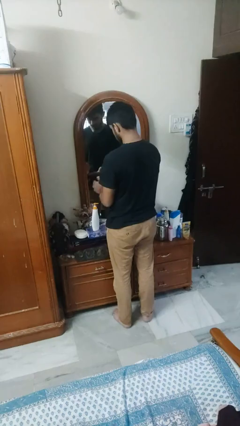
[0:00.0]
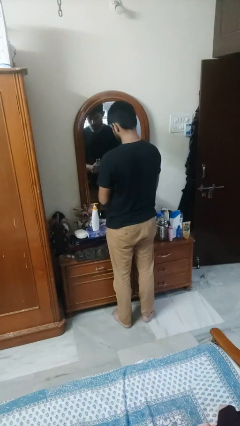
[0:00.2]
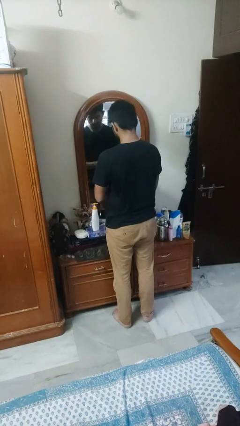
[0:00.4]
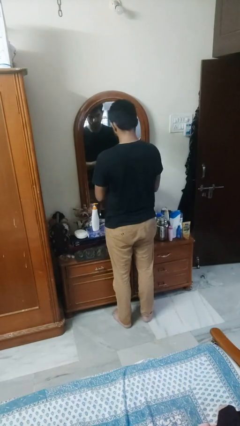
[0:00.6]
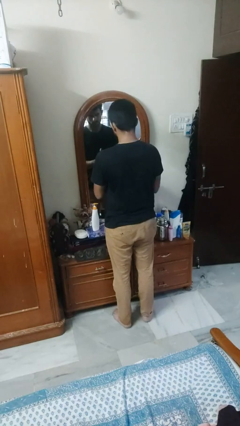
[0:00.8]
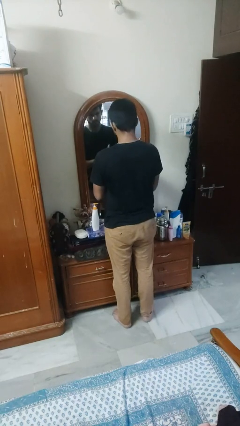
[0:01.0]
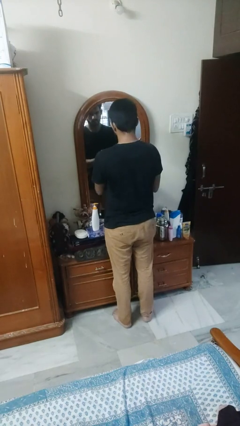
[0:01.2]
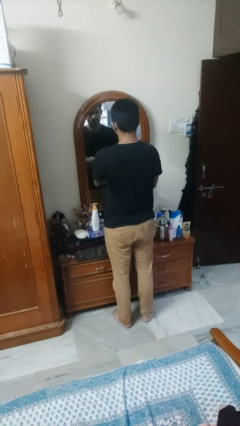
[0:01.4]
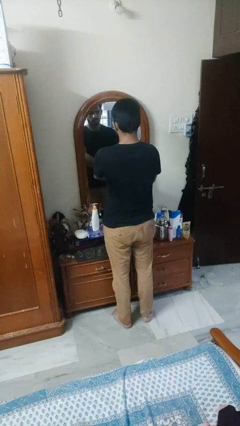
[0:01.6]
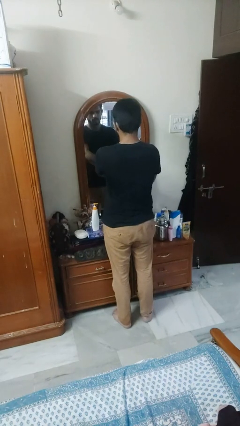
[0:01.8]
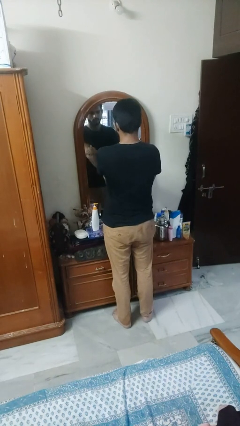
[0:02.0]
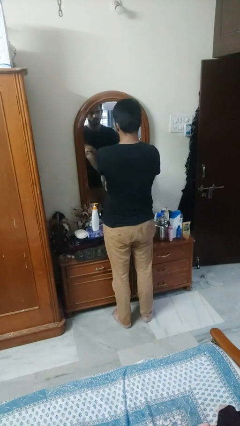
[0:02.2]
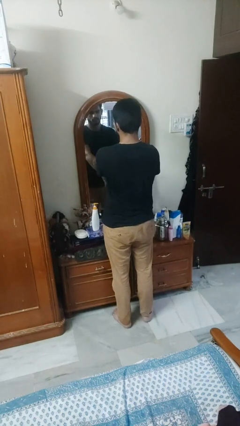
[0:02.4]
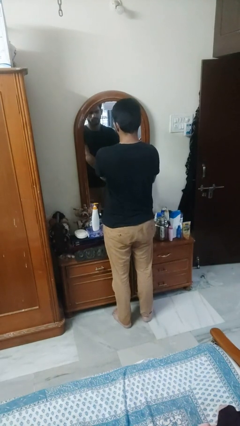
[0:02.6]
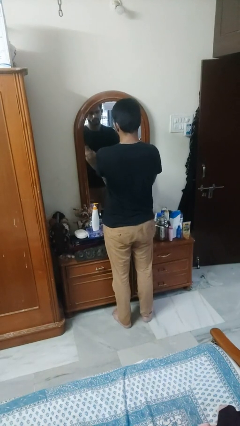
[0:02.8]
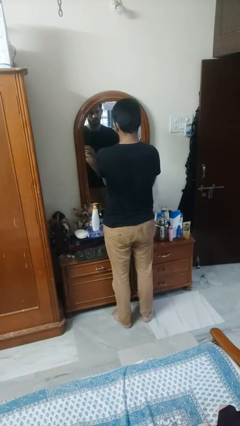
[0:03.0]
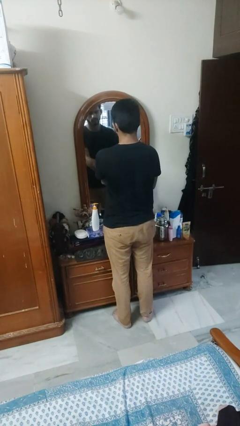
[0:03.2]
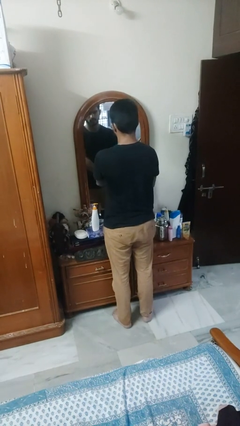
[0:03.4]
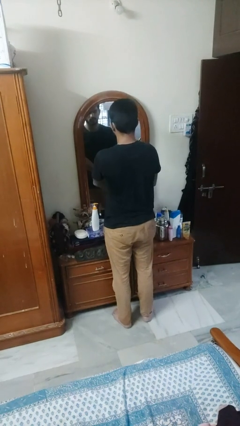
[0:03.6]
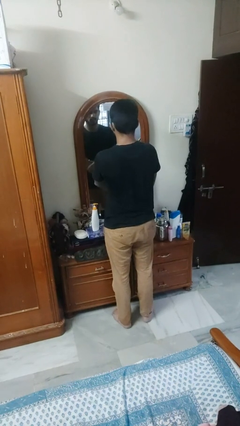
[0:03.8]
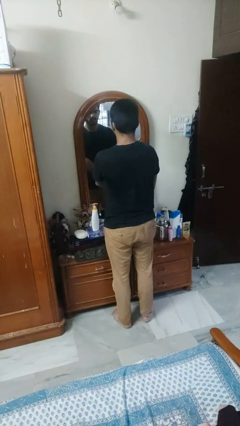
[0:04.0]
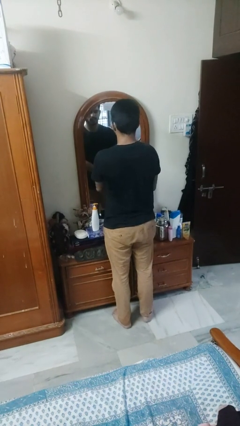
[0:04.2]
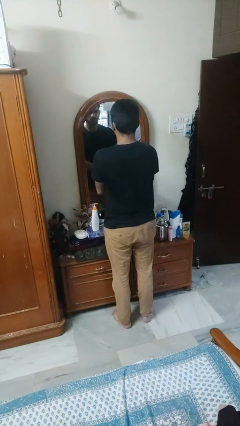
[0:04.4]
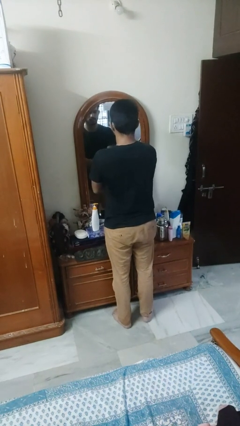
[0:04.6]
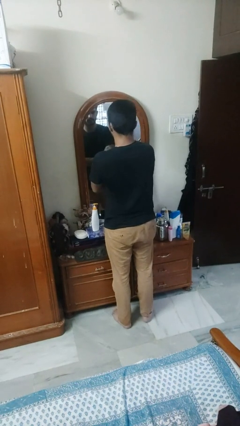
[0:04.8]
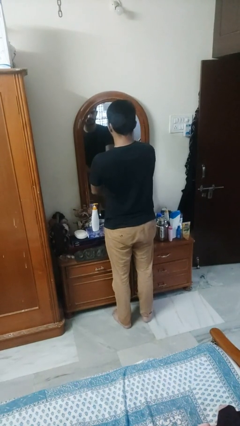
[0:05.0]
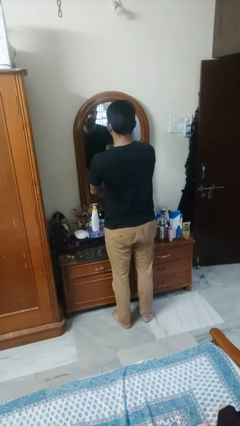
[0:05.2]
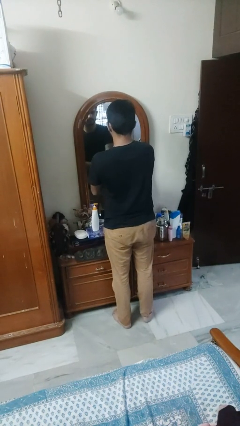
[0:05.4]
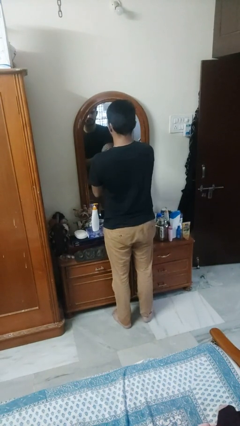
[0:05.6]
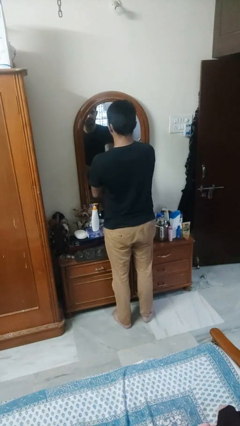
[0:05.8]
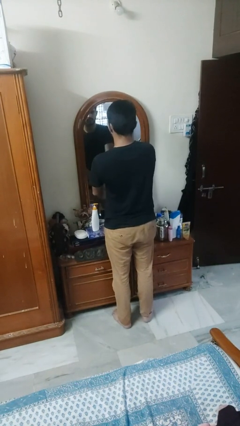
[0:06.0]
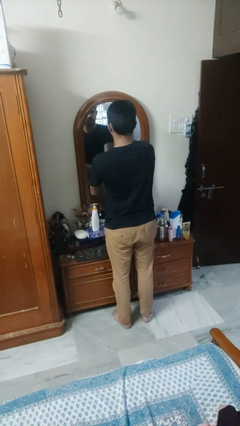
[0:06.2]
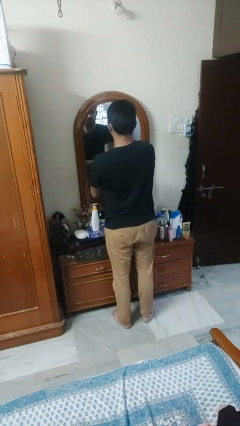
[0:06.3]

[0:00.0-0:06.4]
person applies facial moisturizer

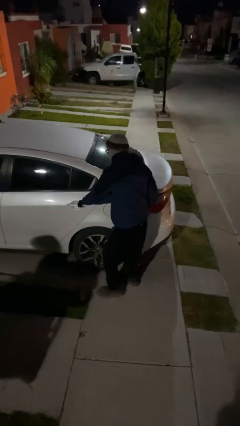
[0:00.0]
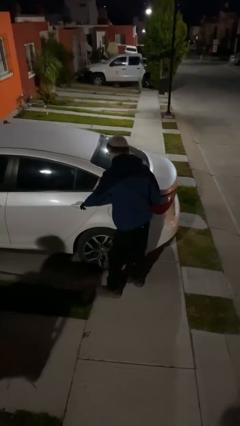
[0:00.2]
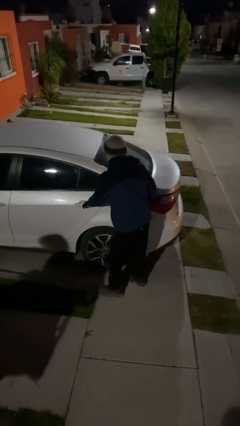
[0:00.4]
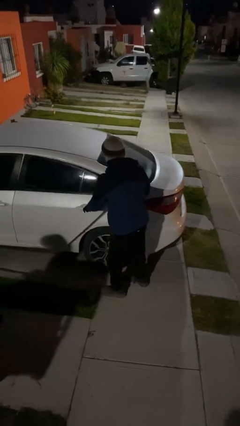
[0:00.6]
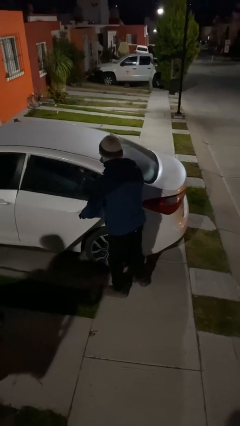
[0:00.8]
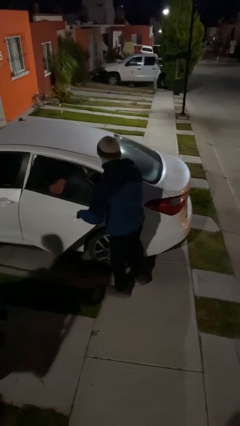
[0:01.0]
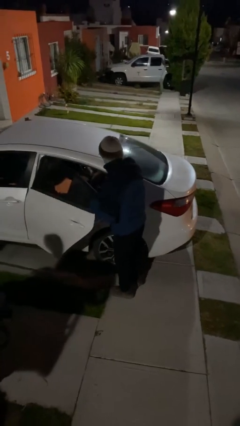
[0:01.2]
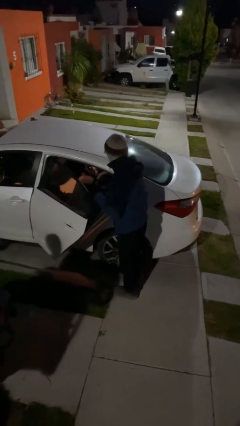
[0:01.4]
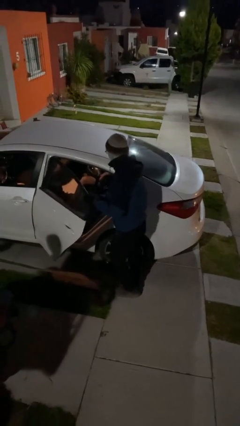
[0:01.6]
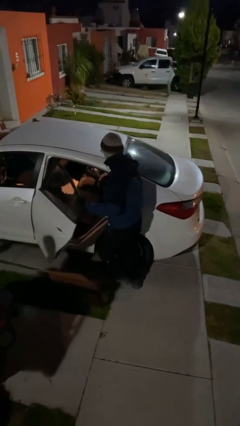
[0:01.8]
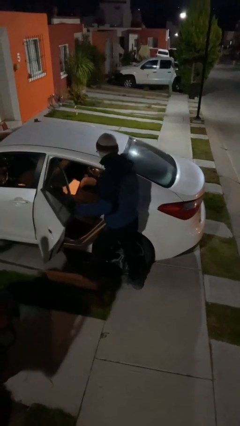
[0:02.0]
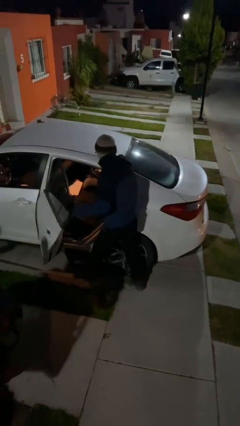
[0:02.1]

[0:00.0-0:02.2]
person opens car door

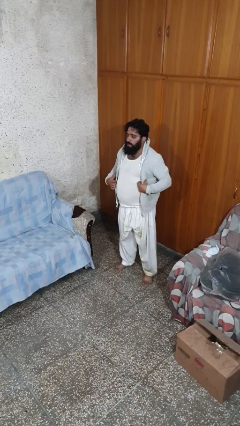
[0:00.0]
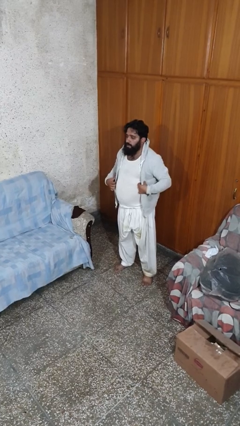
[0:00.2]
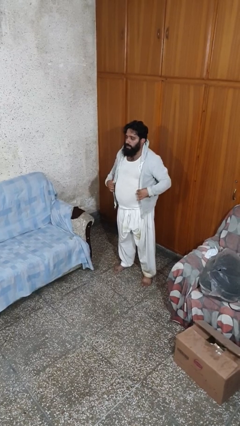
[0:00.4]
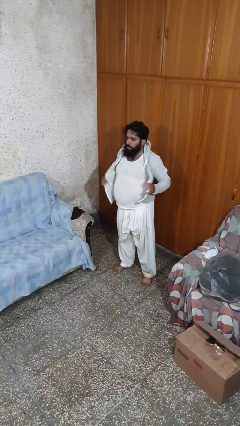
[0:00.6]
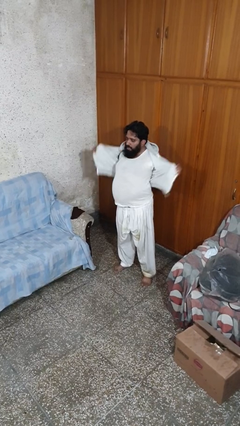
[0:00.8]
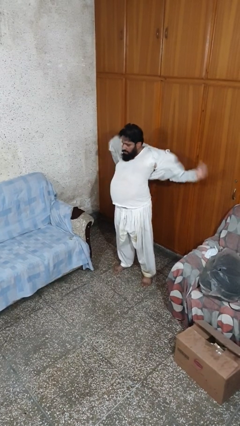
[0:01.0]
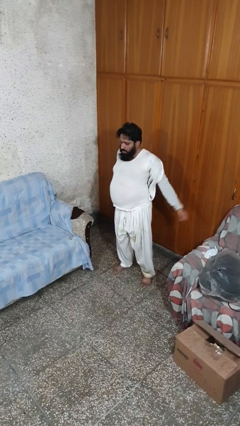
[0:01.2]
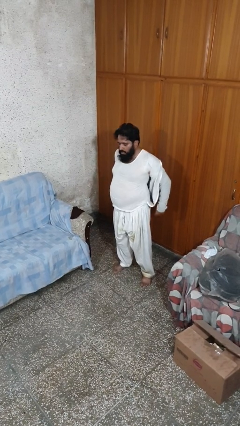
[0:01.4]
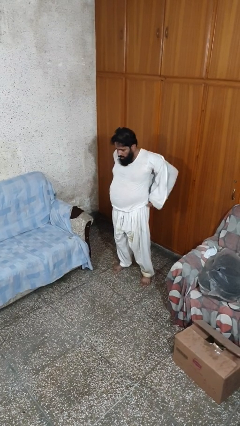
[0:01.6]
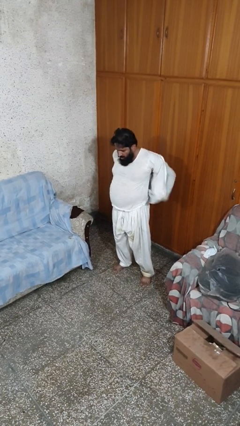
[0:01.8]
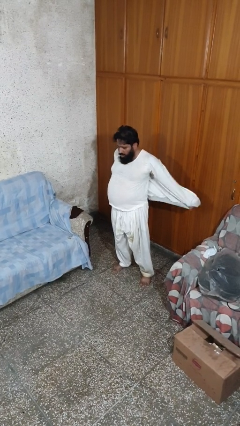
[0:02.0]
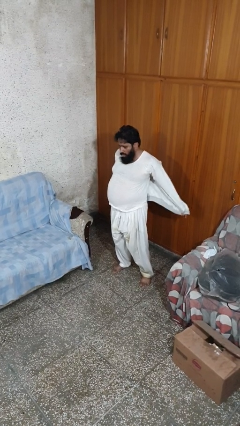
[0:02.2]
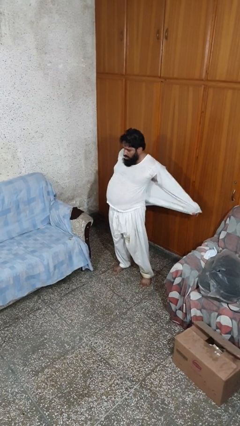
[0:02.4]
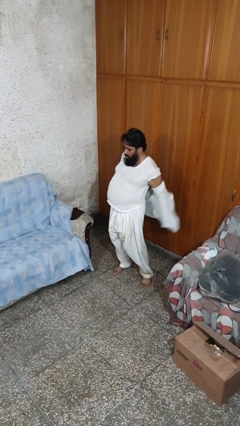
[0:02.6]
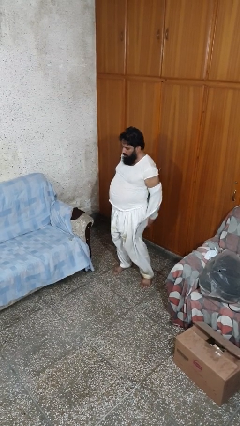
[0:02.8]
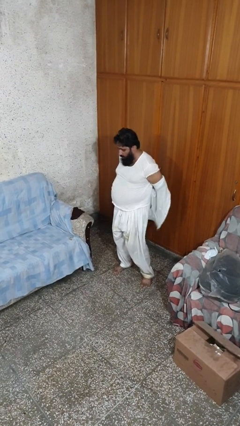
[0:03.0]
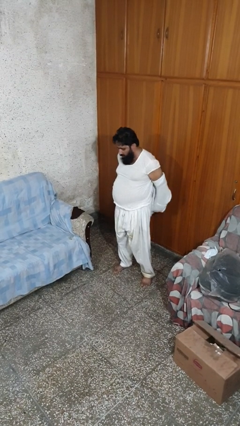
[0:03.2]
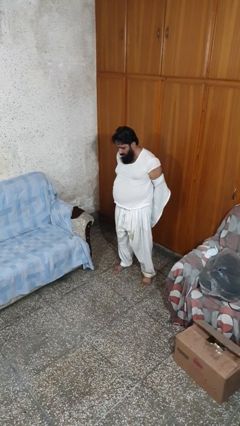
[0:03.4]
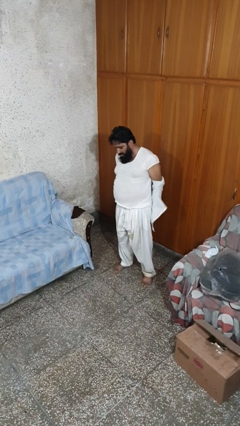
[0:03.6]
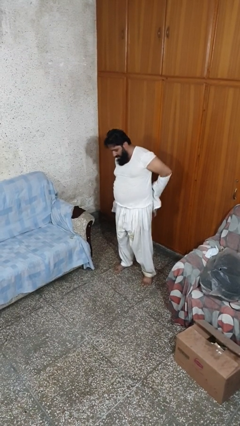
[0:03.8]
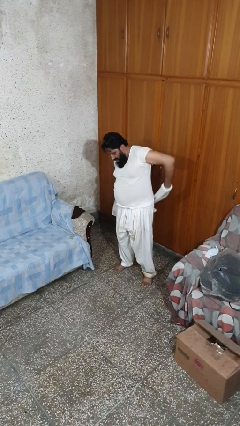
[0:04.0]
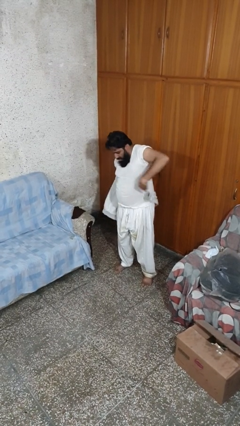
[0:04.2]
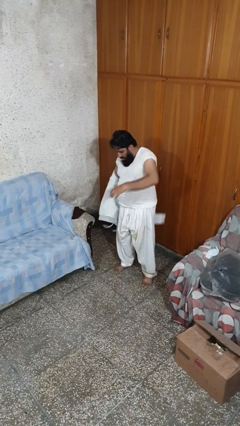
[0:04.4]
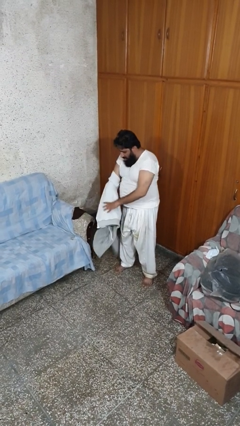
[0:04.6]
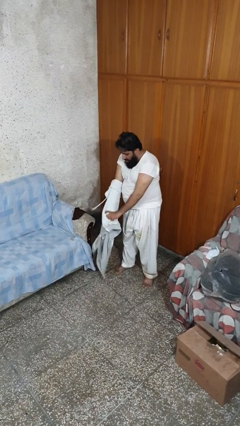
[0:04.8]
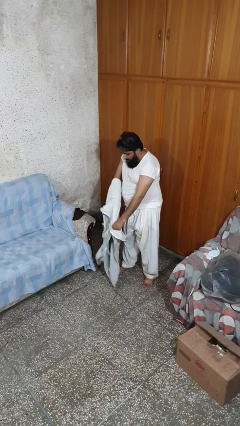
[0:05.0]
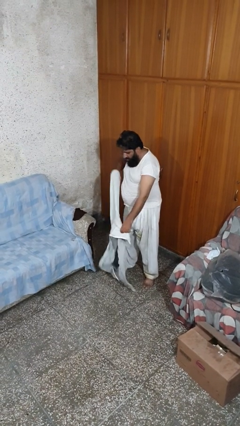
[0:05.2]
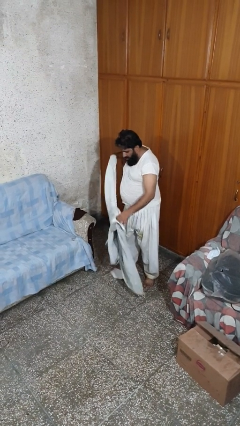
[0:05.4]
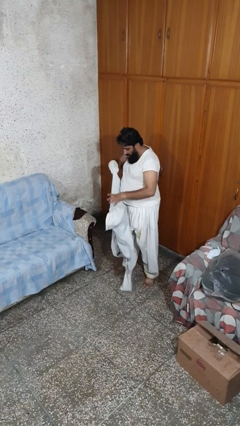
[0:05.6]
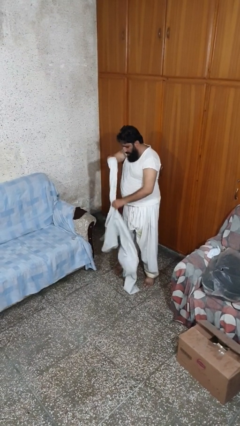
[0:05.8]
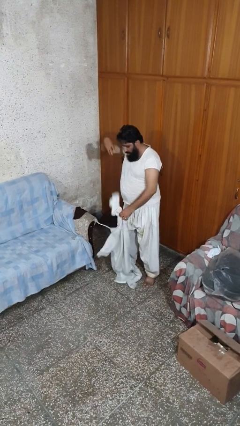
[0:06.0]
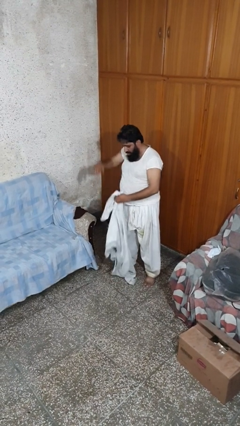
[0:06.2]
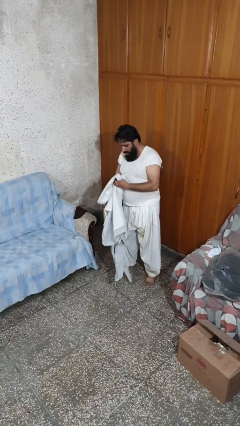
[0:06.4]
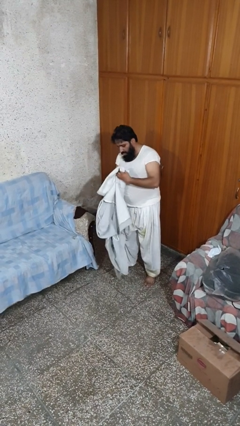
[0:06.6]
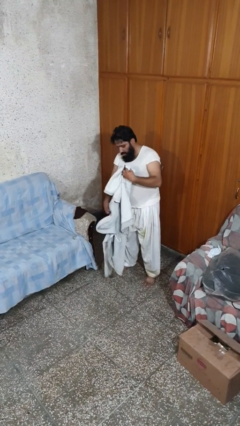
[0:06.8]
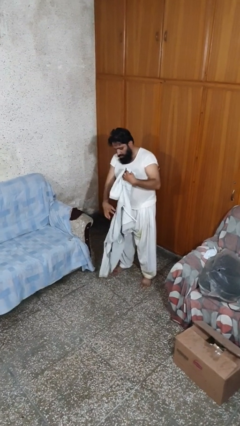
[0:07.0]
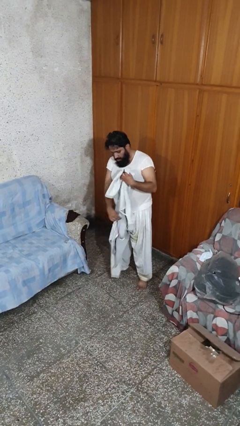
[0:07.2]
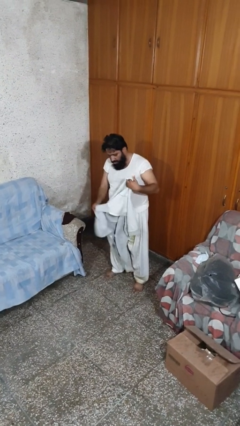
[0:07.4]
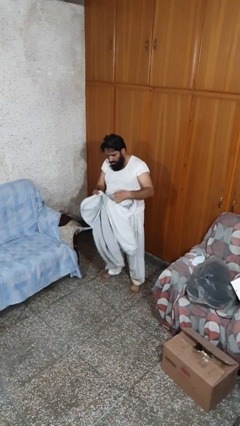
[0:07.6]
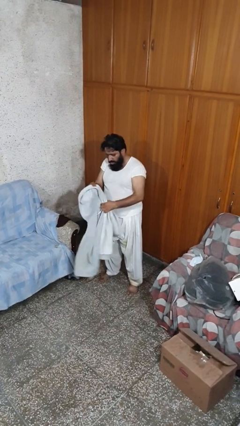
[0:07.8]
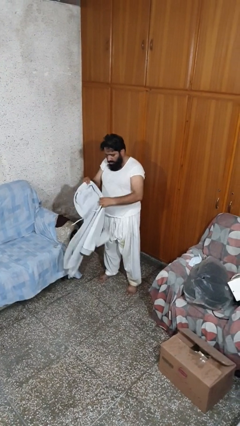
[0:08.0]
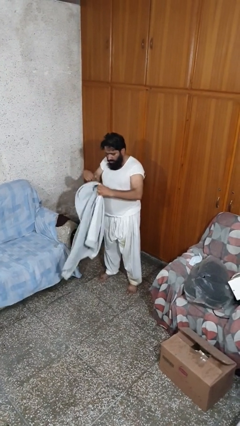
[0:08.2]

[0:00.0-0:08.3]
person takes off jacket

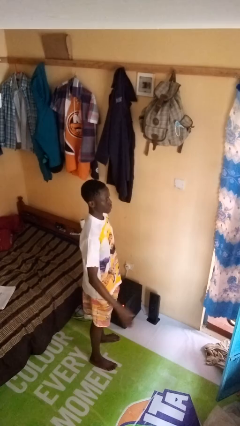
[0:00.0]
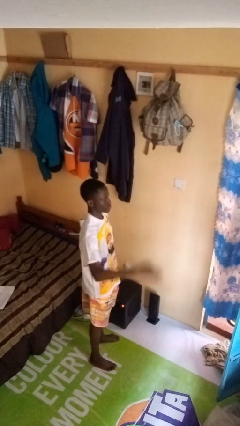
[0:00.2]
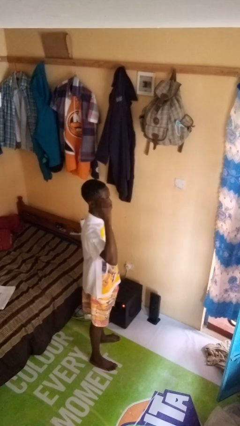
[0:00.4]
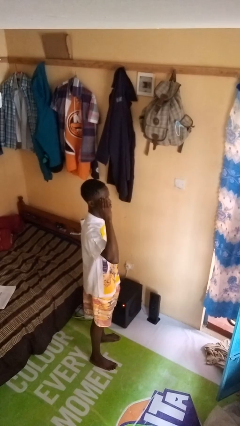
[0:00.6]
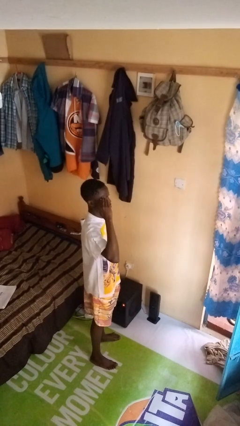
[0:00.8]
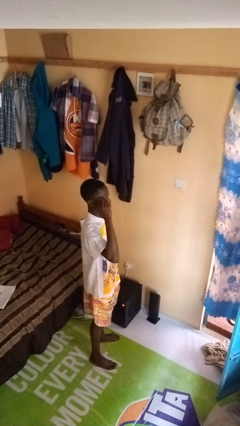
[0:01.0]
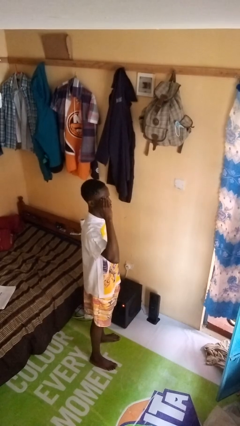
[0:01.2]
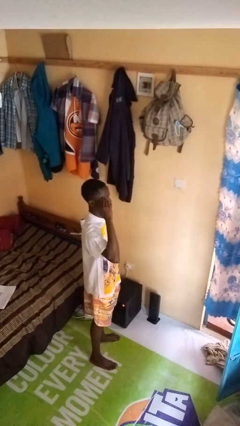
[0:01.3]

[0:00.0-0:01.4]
person salutes
